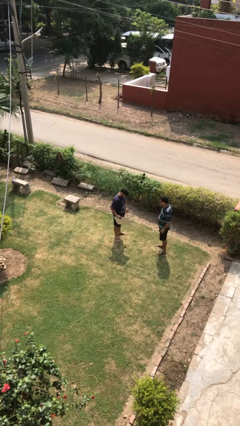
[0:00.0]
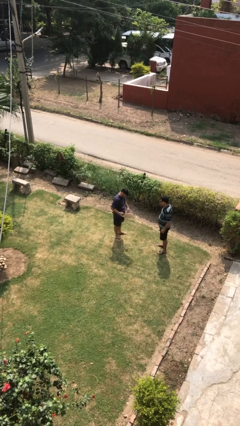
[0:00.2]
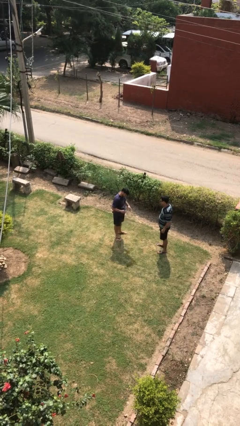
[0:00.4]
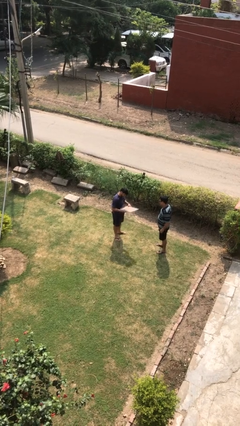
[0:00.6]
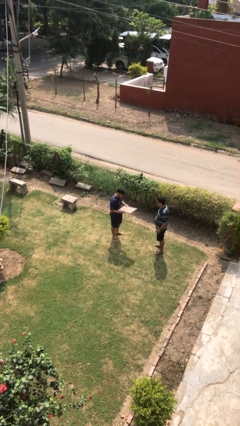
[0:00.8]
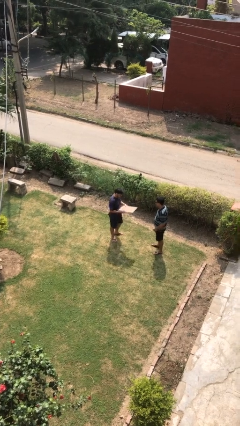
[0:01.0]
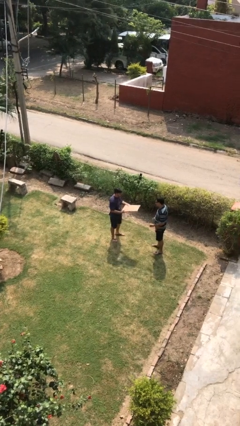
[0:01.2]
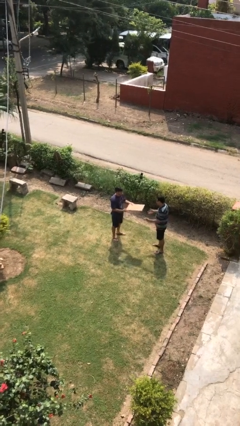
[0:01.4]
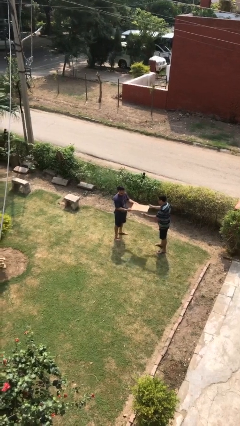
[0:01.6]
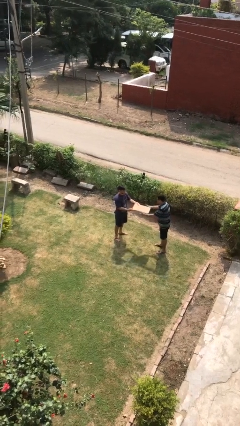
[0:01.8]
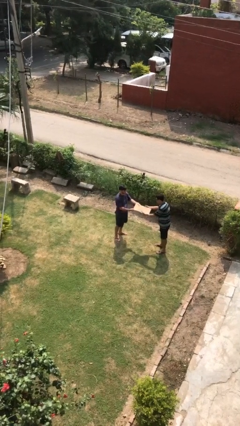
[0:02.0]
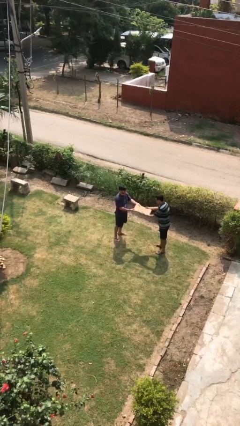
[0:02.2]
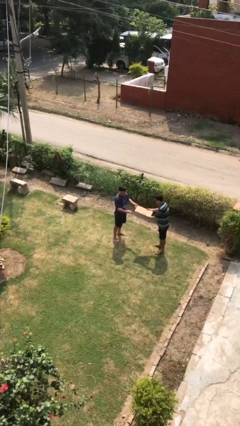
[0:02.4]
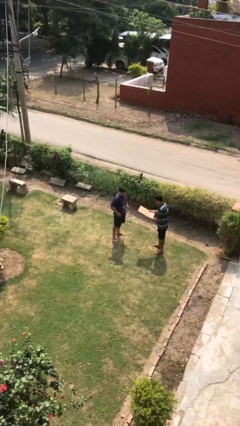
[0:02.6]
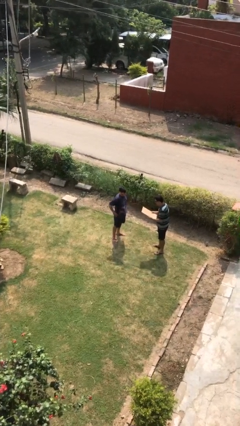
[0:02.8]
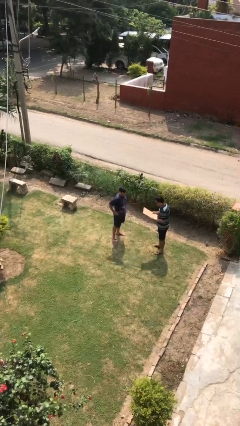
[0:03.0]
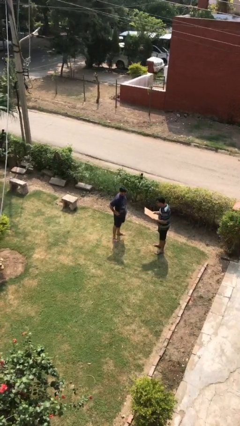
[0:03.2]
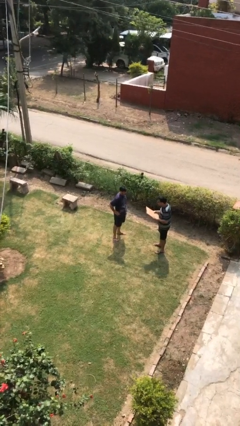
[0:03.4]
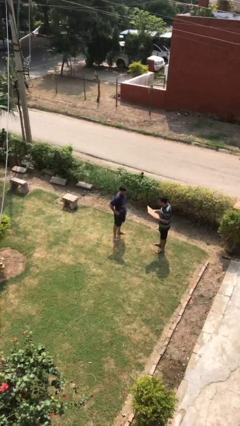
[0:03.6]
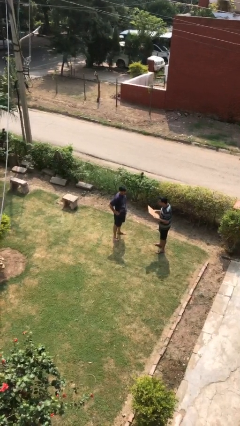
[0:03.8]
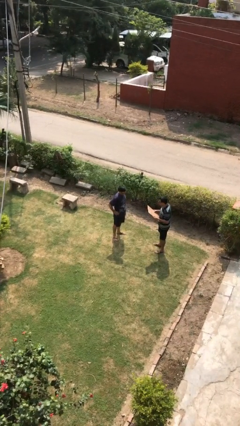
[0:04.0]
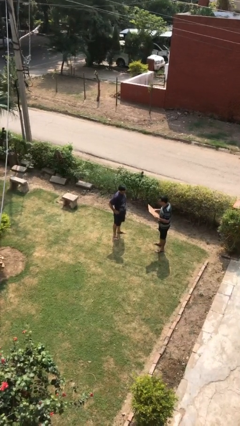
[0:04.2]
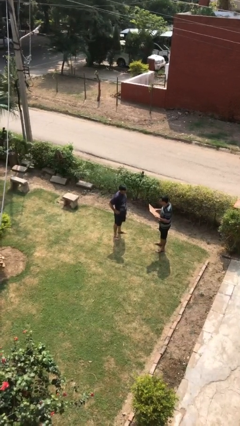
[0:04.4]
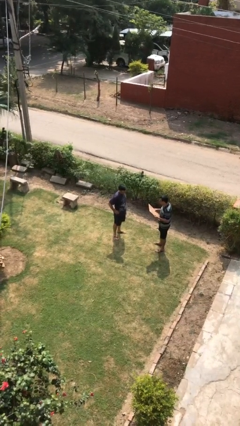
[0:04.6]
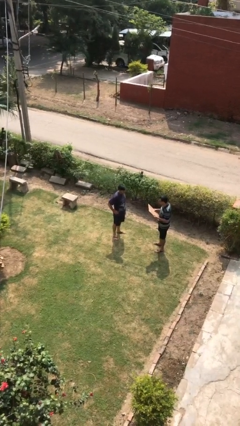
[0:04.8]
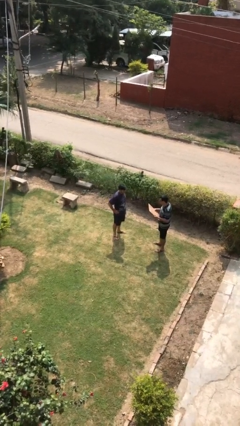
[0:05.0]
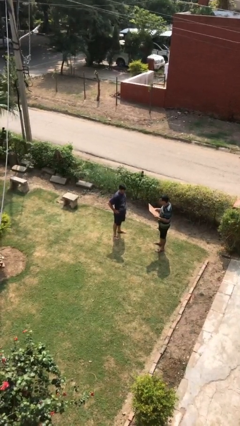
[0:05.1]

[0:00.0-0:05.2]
person transfers object to person

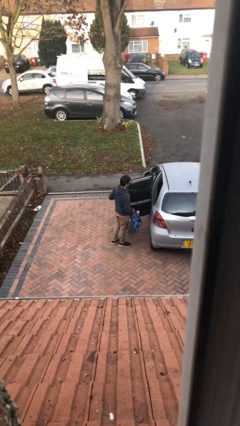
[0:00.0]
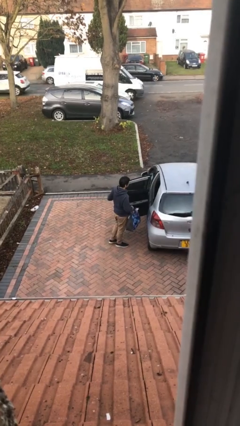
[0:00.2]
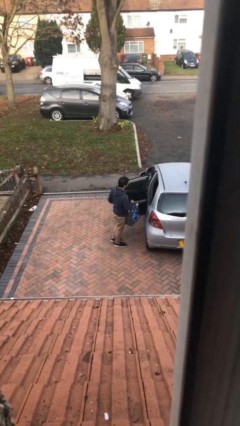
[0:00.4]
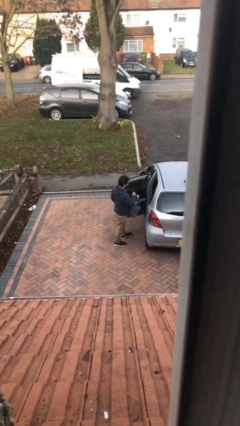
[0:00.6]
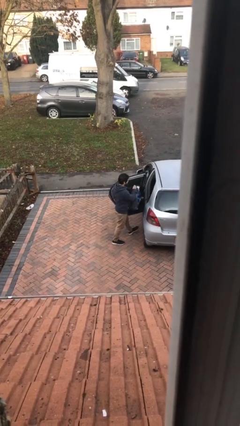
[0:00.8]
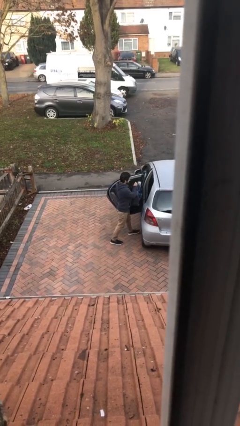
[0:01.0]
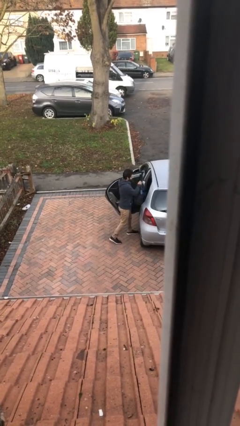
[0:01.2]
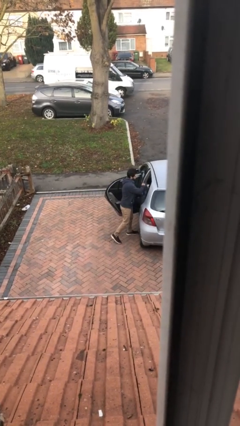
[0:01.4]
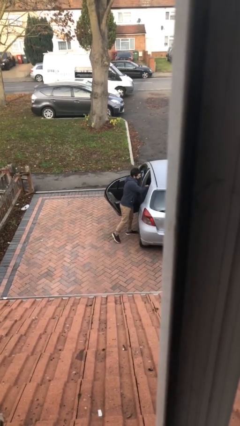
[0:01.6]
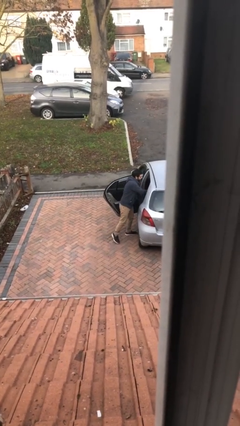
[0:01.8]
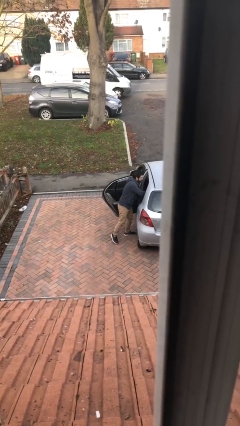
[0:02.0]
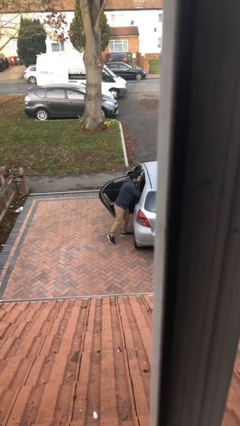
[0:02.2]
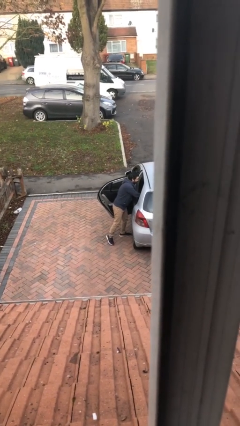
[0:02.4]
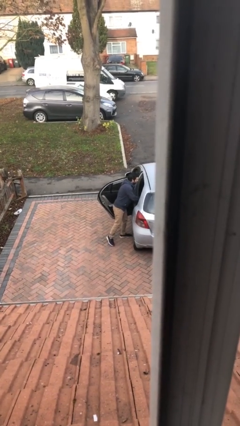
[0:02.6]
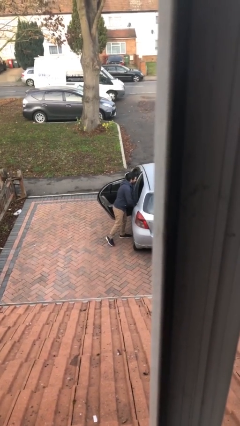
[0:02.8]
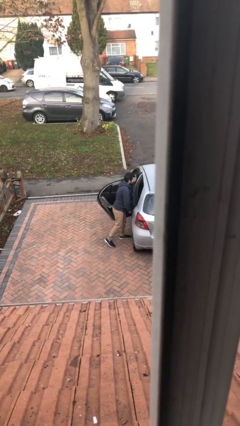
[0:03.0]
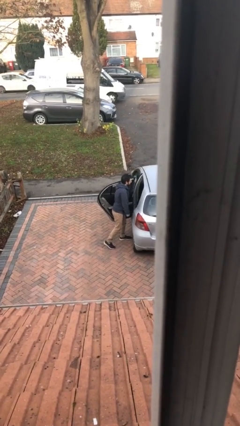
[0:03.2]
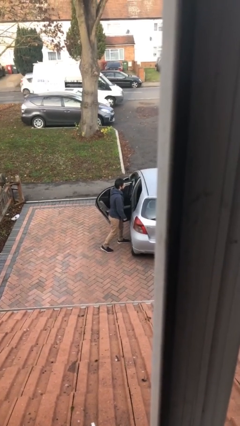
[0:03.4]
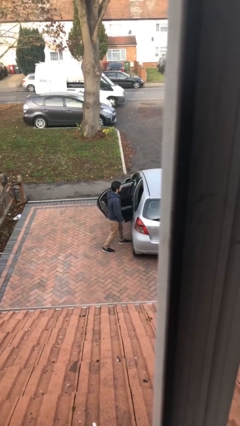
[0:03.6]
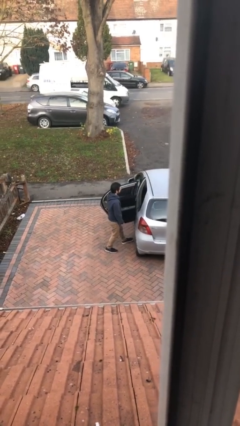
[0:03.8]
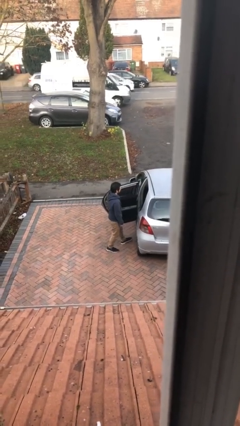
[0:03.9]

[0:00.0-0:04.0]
person loads car

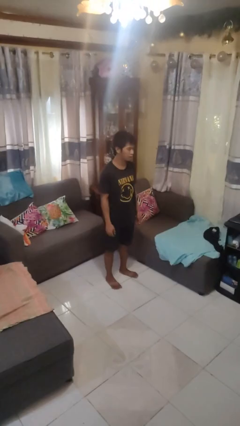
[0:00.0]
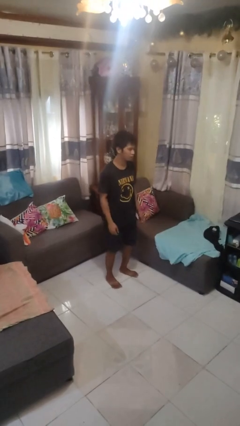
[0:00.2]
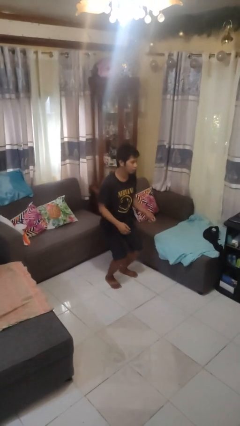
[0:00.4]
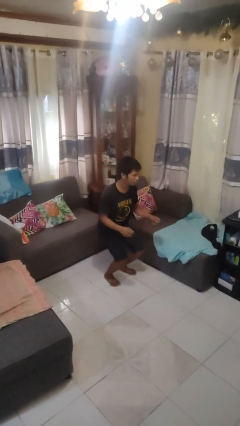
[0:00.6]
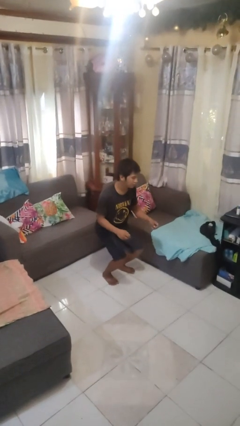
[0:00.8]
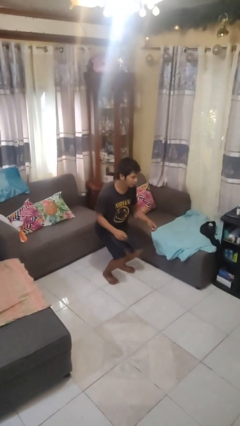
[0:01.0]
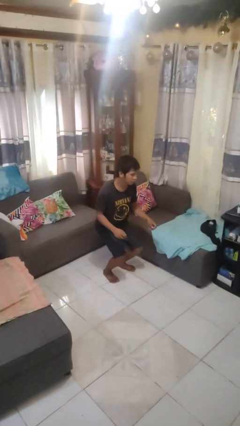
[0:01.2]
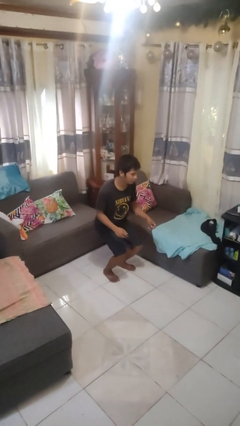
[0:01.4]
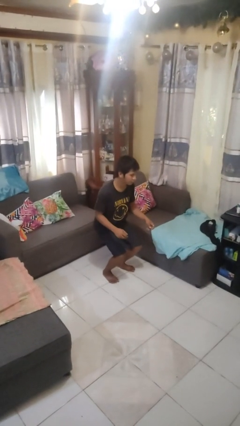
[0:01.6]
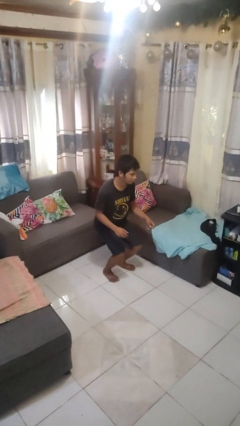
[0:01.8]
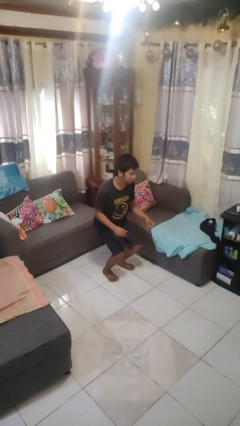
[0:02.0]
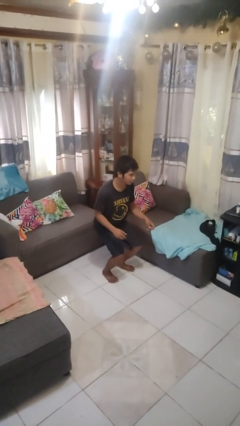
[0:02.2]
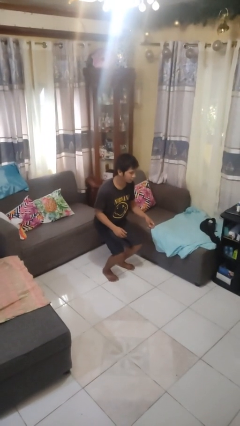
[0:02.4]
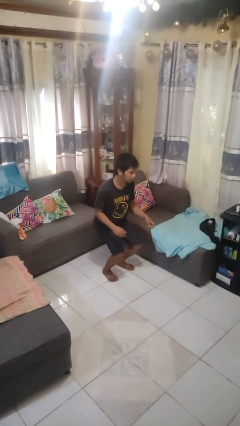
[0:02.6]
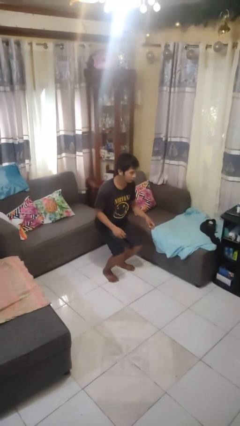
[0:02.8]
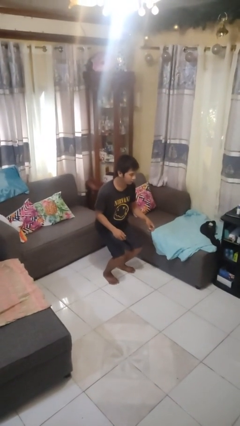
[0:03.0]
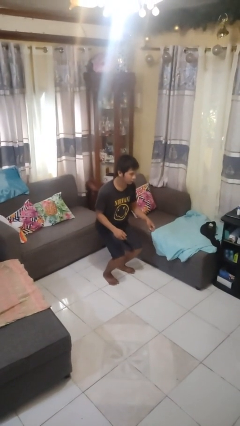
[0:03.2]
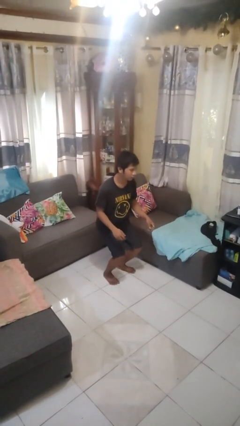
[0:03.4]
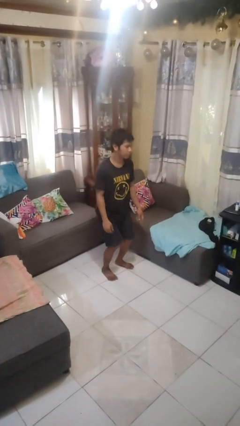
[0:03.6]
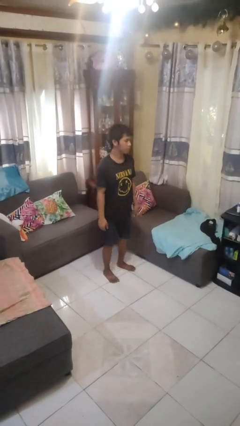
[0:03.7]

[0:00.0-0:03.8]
person squats

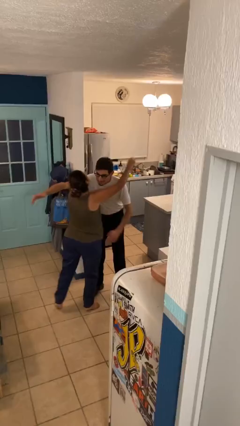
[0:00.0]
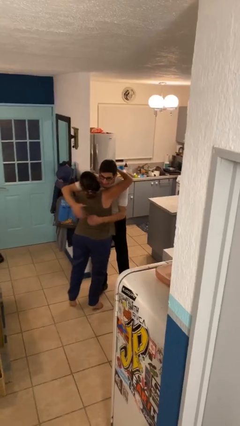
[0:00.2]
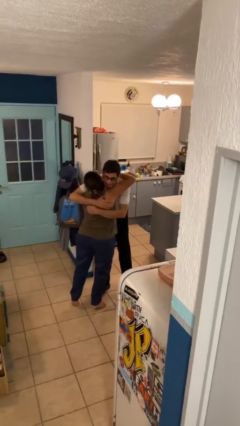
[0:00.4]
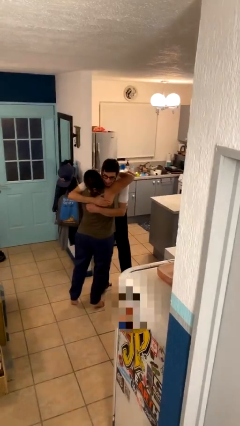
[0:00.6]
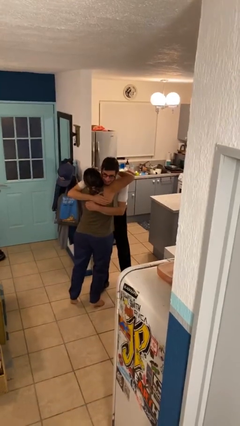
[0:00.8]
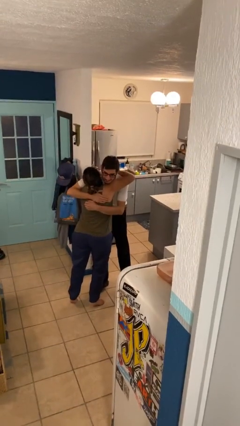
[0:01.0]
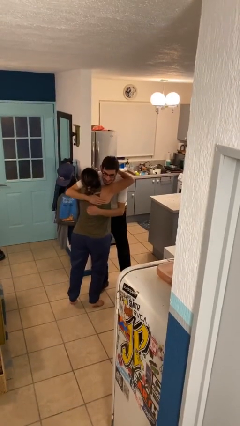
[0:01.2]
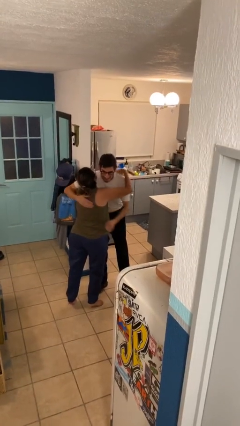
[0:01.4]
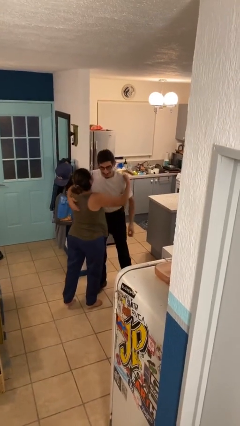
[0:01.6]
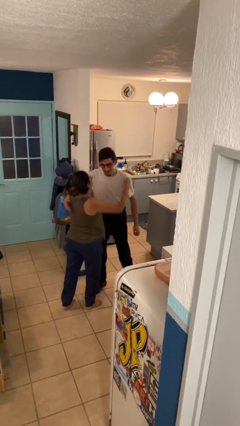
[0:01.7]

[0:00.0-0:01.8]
person embraces person

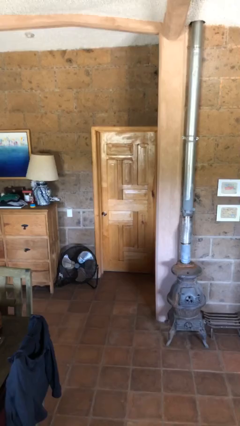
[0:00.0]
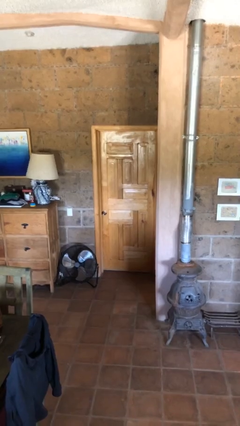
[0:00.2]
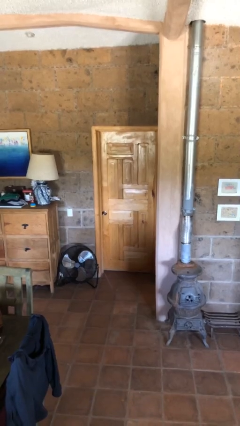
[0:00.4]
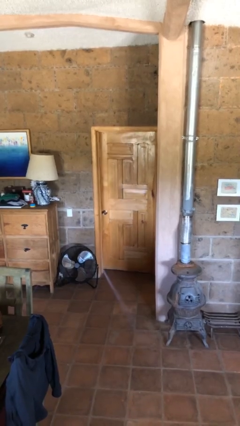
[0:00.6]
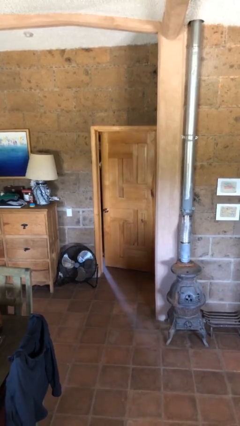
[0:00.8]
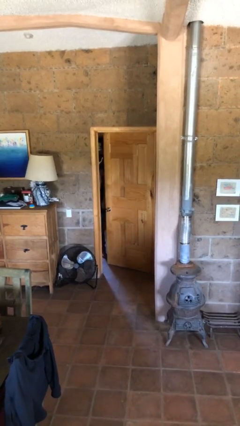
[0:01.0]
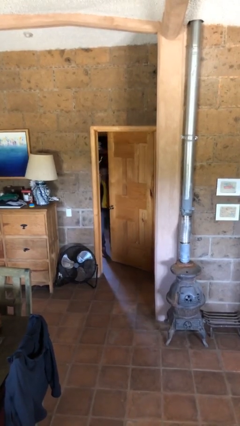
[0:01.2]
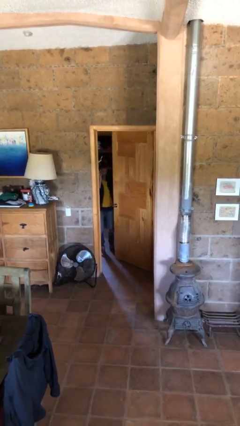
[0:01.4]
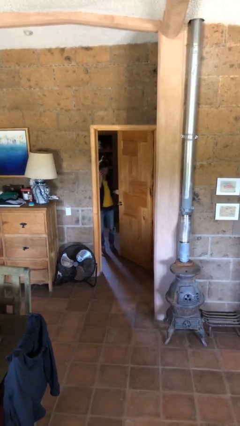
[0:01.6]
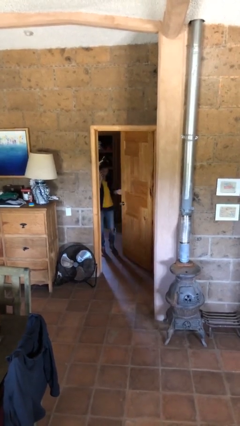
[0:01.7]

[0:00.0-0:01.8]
person opens facility door

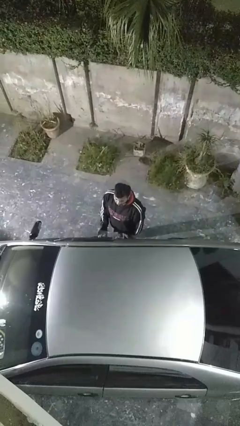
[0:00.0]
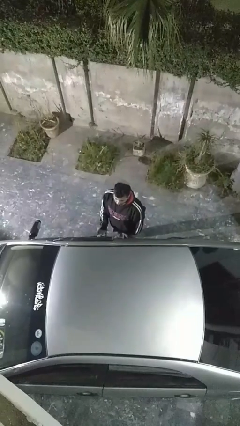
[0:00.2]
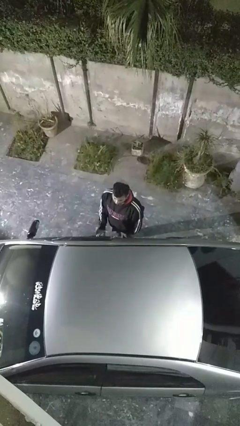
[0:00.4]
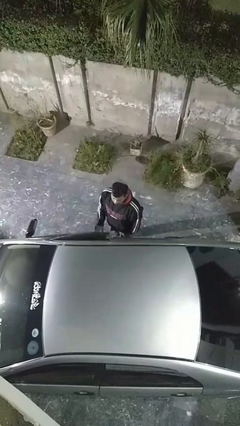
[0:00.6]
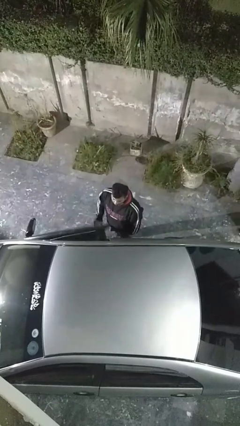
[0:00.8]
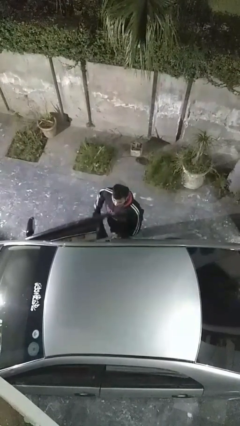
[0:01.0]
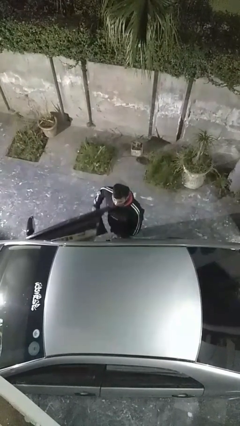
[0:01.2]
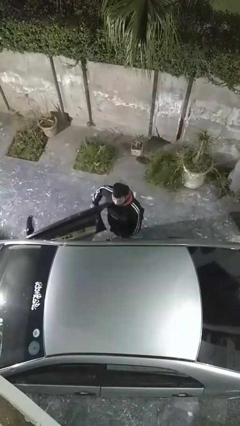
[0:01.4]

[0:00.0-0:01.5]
person opens car door
